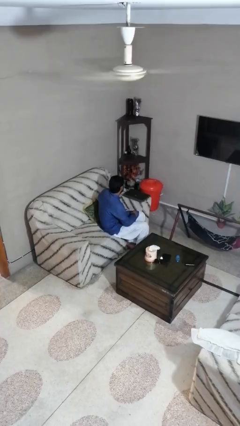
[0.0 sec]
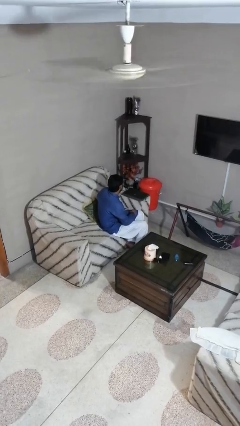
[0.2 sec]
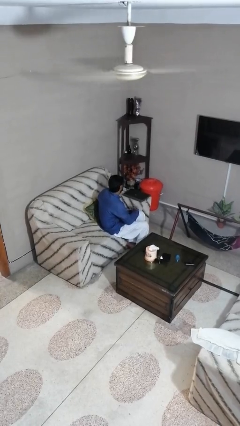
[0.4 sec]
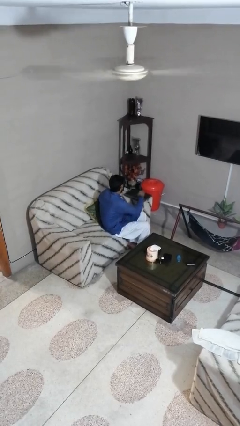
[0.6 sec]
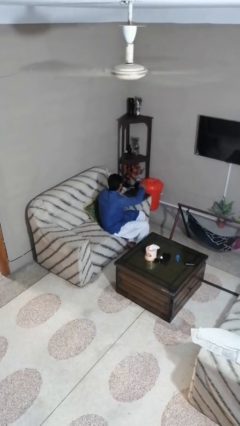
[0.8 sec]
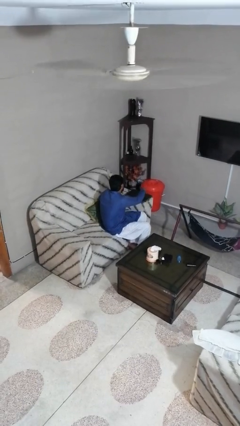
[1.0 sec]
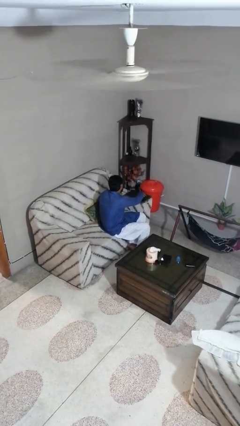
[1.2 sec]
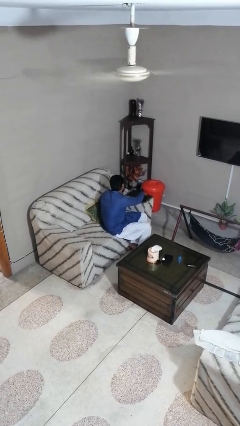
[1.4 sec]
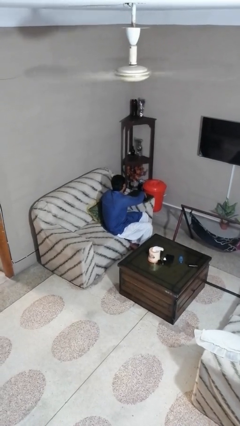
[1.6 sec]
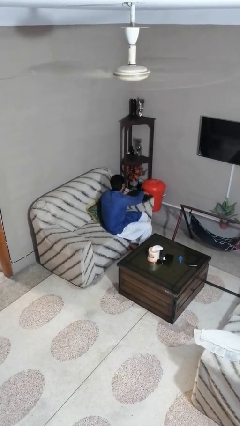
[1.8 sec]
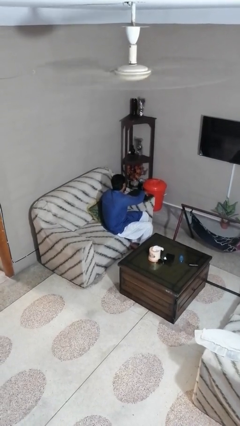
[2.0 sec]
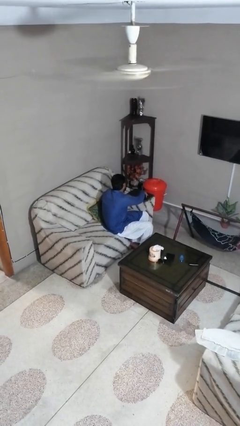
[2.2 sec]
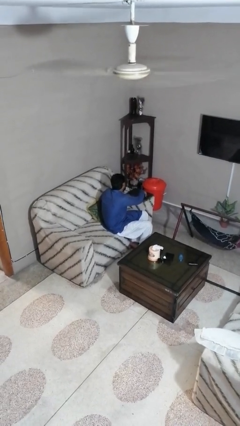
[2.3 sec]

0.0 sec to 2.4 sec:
person taps object with finger

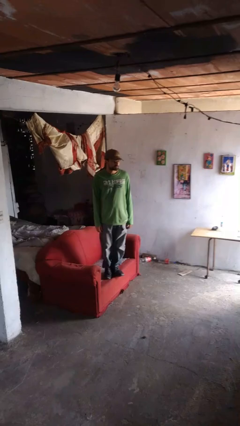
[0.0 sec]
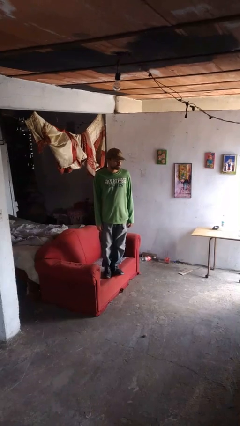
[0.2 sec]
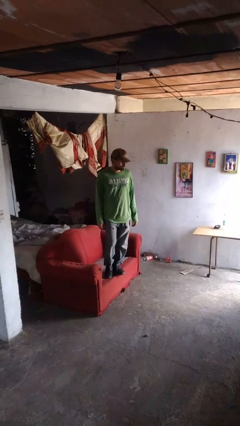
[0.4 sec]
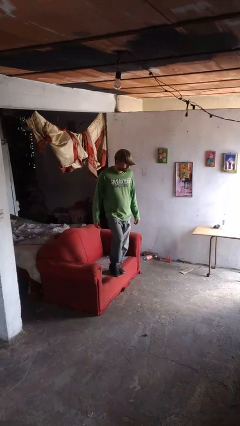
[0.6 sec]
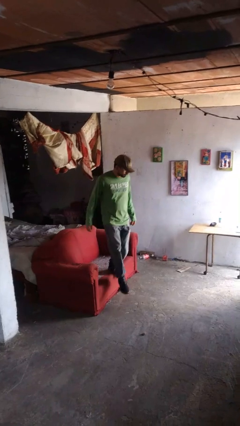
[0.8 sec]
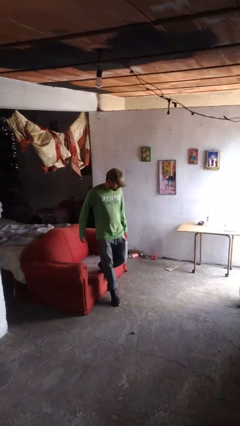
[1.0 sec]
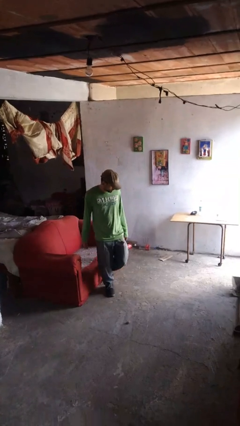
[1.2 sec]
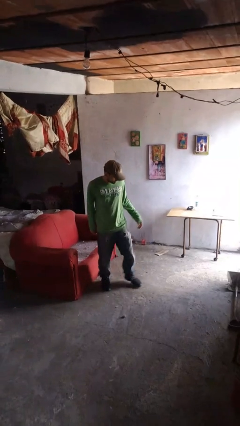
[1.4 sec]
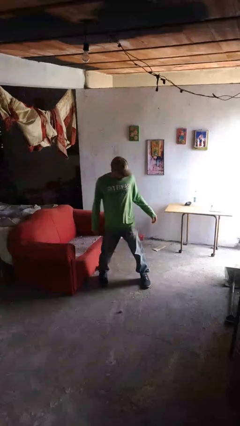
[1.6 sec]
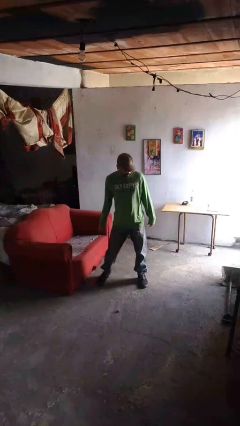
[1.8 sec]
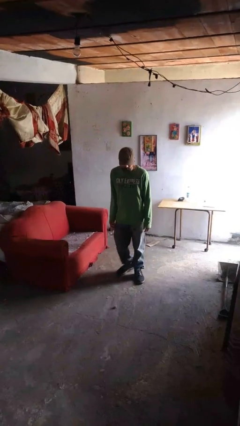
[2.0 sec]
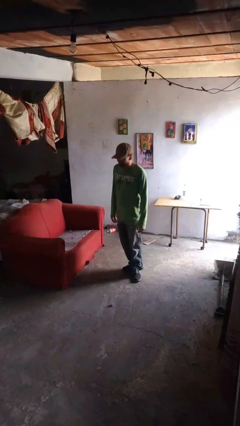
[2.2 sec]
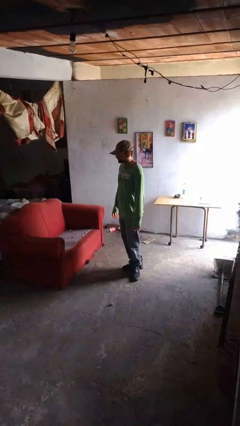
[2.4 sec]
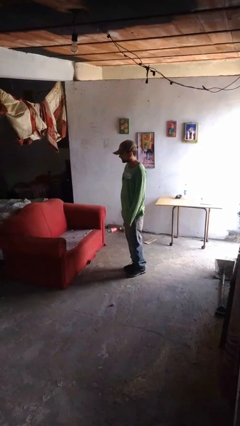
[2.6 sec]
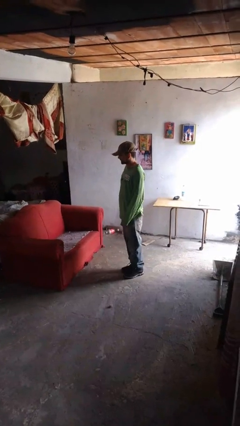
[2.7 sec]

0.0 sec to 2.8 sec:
person climbs off couch

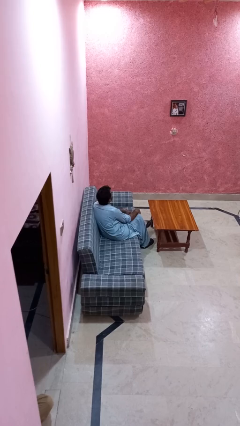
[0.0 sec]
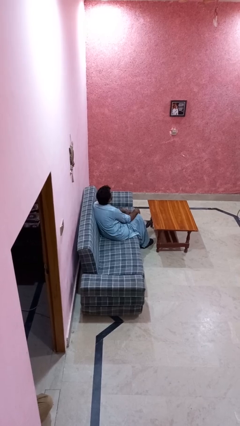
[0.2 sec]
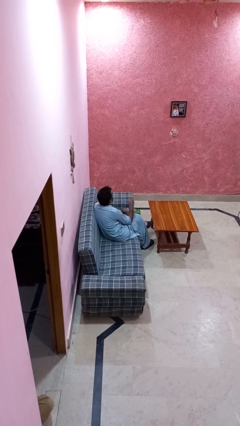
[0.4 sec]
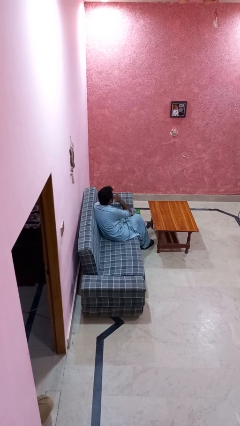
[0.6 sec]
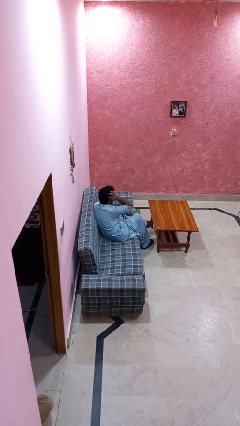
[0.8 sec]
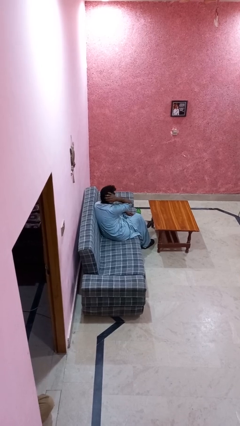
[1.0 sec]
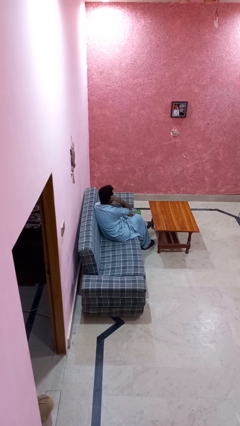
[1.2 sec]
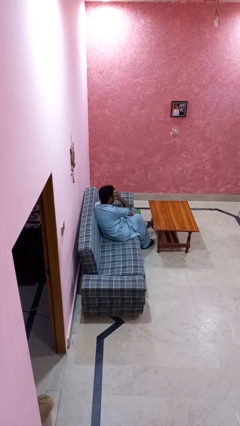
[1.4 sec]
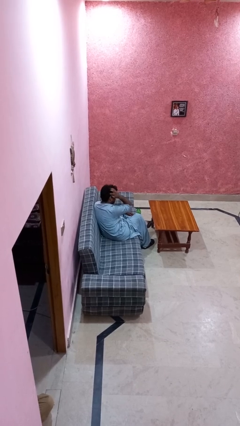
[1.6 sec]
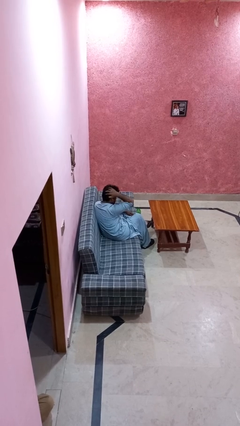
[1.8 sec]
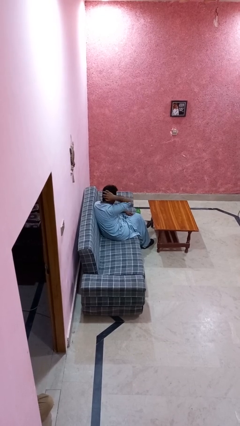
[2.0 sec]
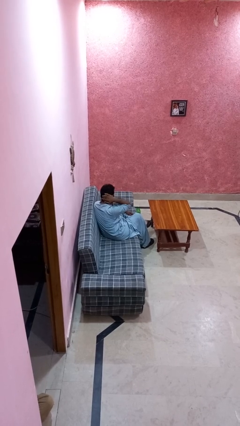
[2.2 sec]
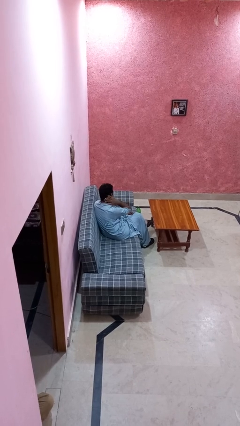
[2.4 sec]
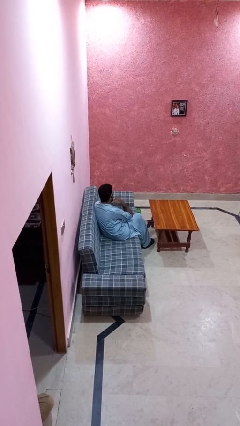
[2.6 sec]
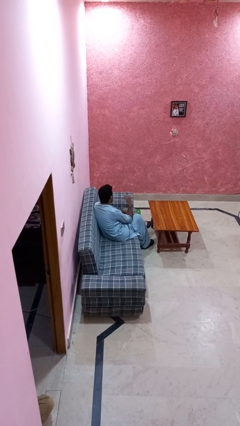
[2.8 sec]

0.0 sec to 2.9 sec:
person strokes hair

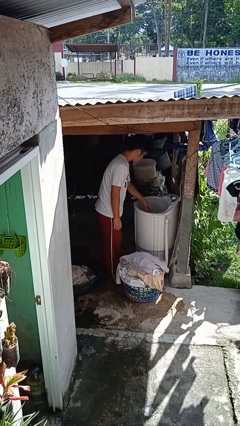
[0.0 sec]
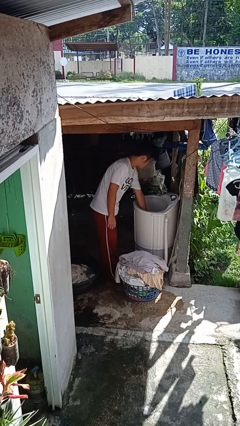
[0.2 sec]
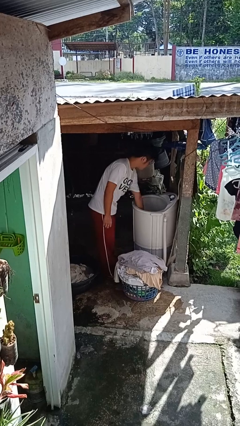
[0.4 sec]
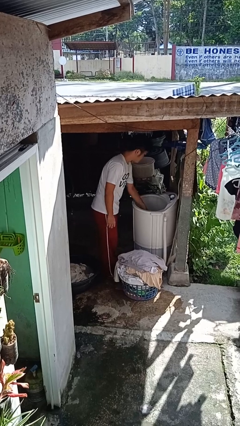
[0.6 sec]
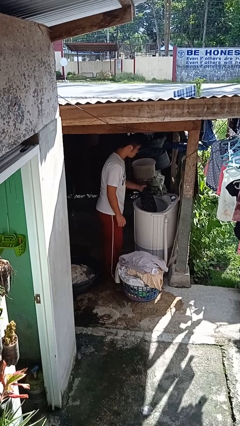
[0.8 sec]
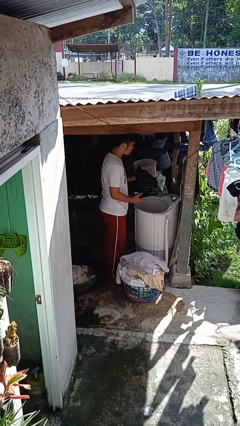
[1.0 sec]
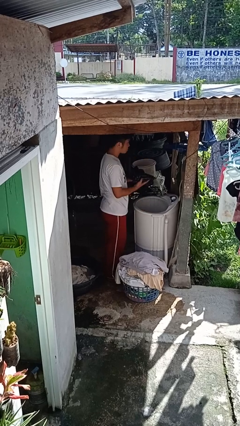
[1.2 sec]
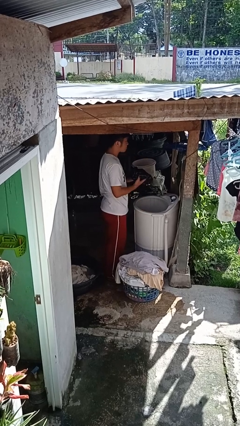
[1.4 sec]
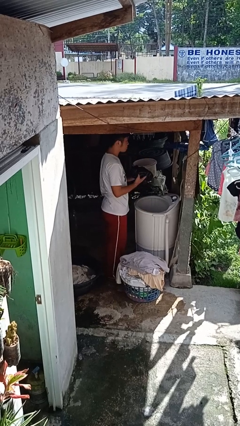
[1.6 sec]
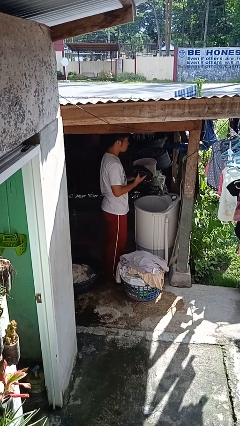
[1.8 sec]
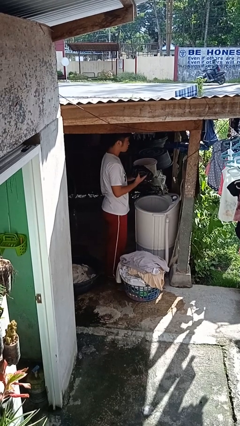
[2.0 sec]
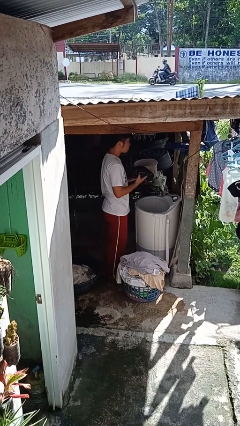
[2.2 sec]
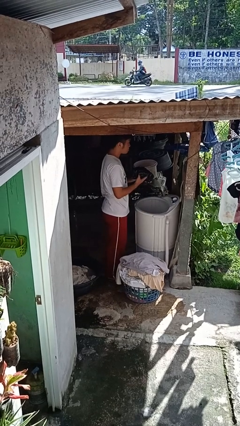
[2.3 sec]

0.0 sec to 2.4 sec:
person unloads clotheswasher

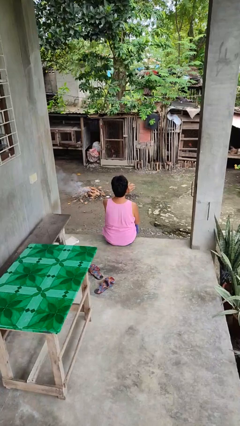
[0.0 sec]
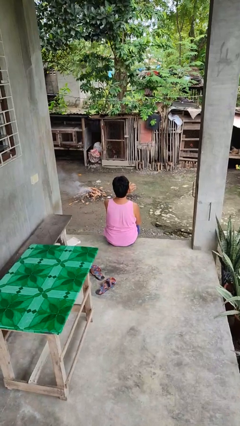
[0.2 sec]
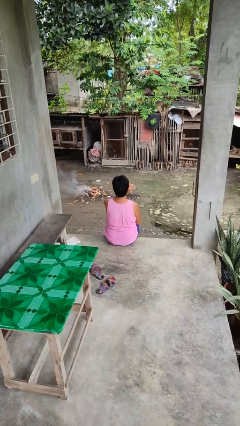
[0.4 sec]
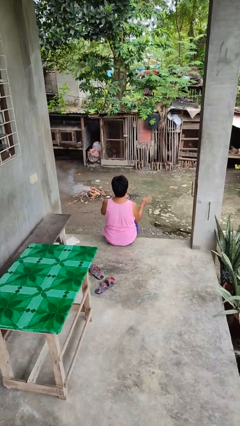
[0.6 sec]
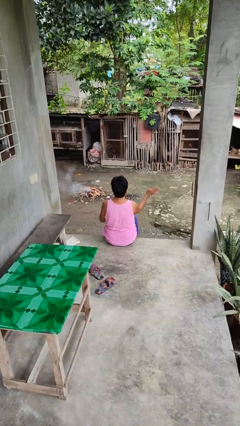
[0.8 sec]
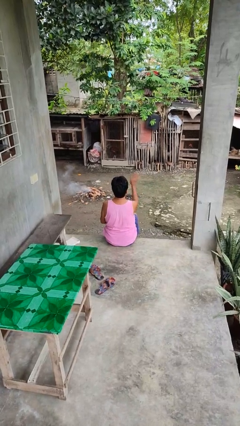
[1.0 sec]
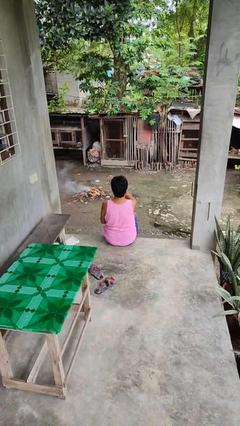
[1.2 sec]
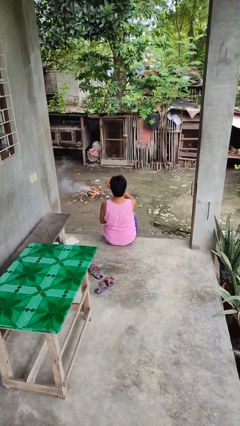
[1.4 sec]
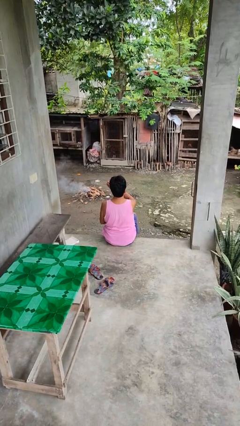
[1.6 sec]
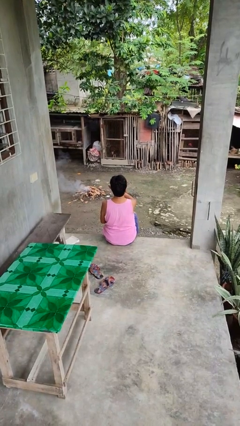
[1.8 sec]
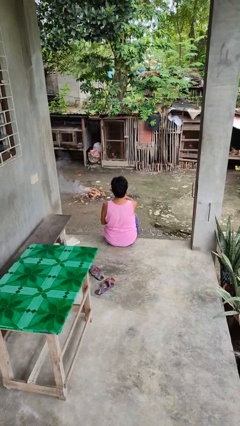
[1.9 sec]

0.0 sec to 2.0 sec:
person gestures swipe left

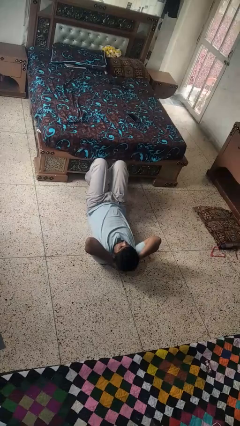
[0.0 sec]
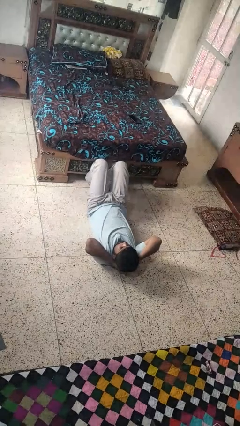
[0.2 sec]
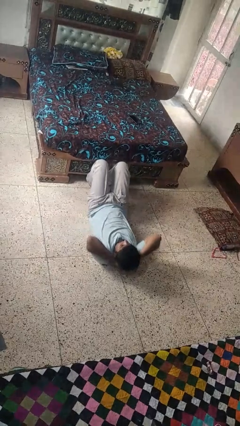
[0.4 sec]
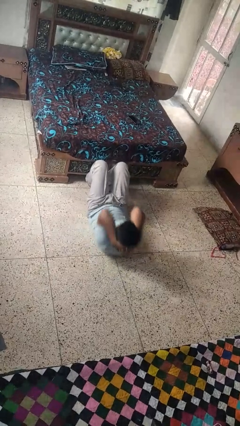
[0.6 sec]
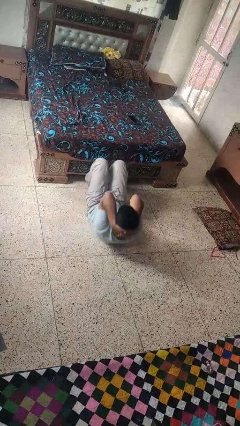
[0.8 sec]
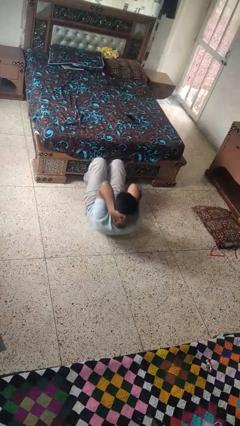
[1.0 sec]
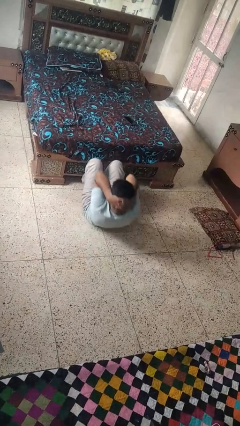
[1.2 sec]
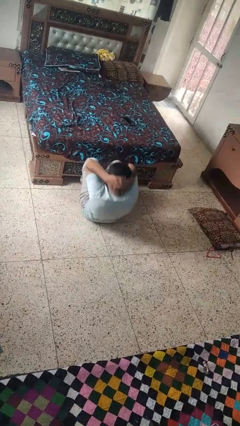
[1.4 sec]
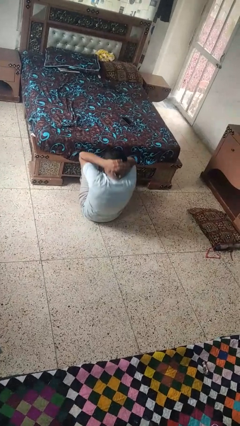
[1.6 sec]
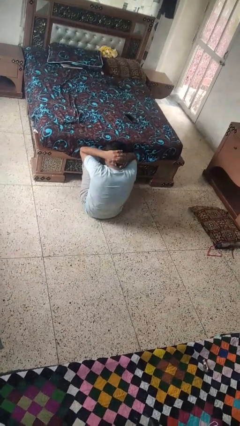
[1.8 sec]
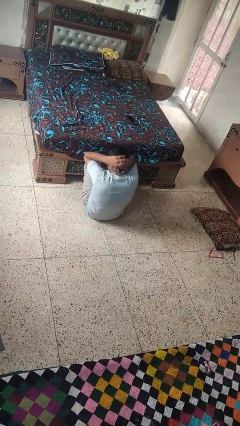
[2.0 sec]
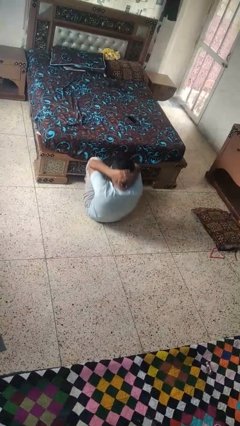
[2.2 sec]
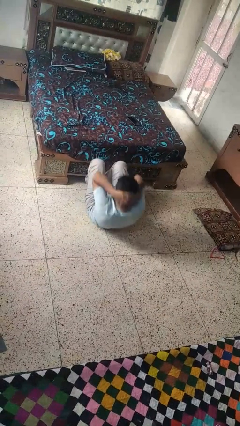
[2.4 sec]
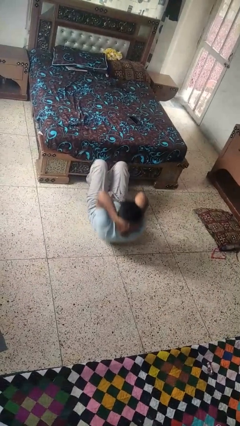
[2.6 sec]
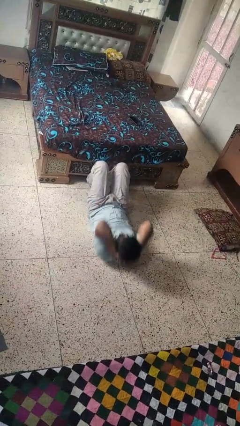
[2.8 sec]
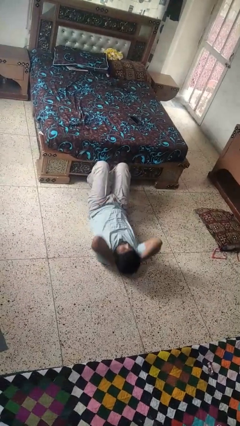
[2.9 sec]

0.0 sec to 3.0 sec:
person exercises with situp

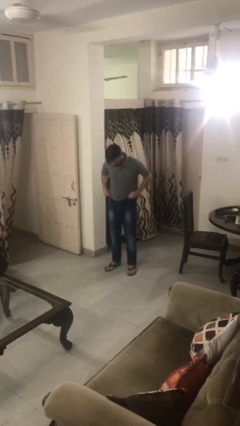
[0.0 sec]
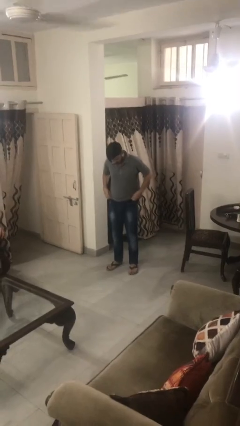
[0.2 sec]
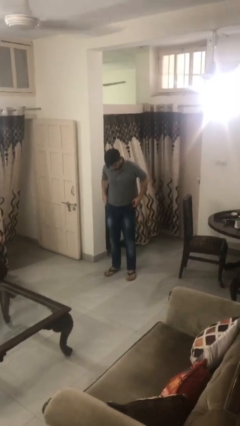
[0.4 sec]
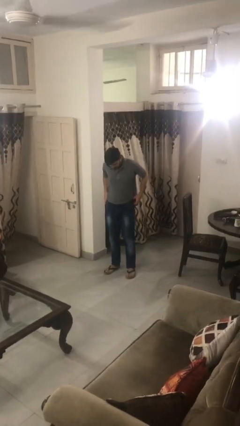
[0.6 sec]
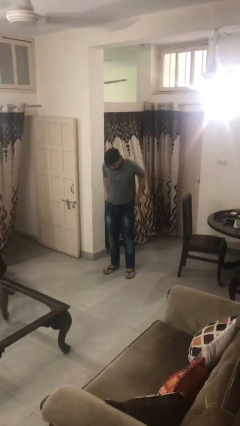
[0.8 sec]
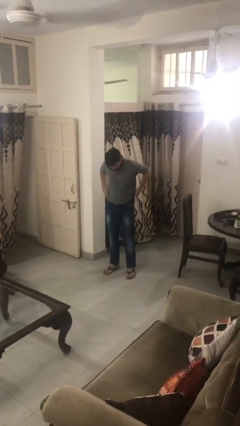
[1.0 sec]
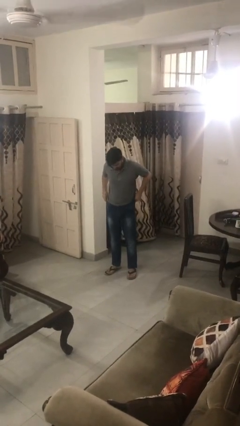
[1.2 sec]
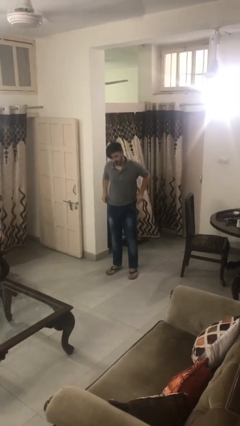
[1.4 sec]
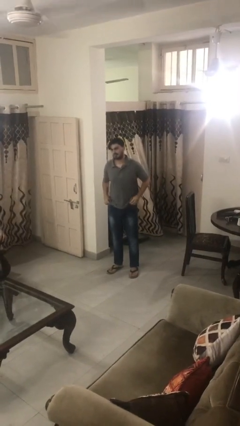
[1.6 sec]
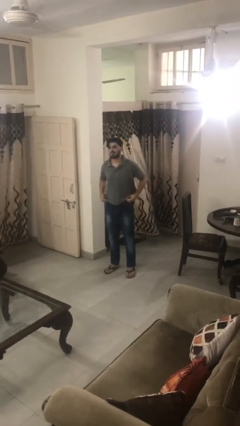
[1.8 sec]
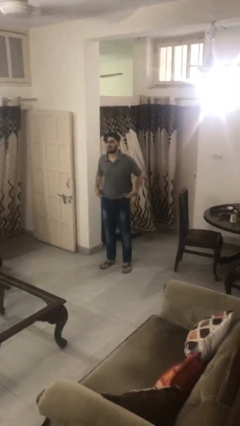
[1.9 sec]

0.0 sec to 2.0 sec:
person hikes up pants
